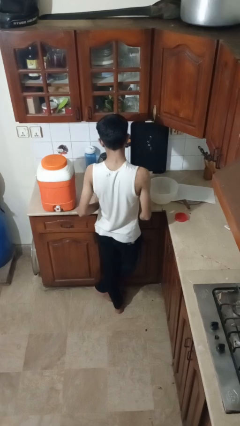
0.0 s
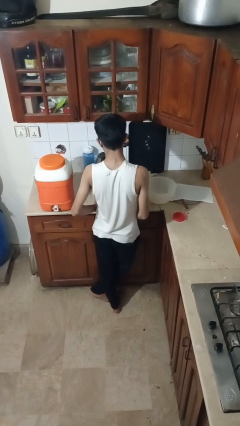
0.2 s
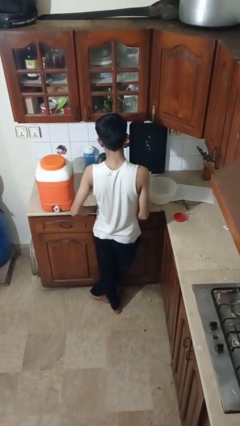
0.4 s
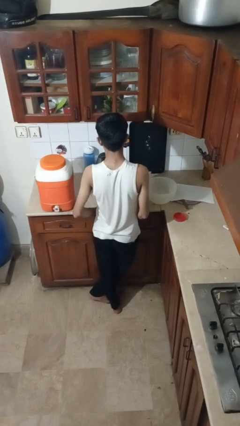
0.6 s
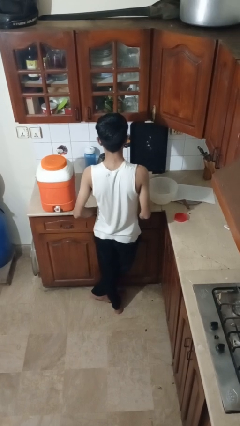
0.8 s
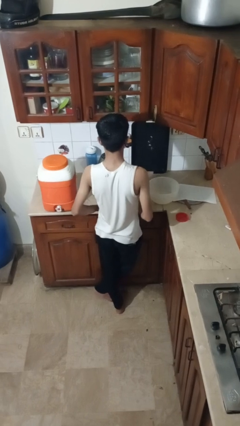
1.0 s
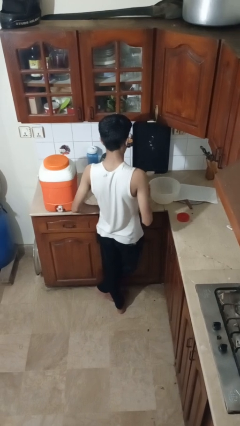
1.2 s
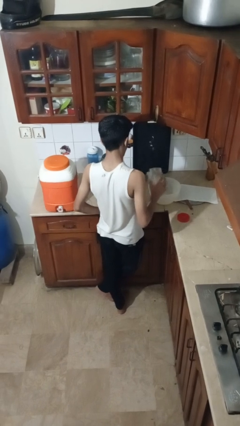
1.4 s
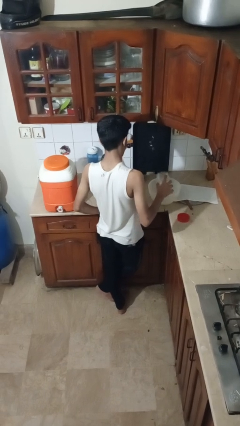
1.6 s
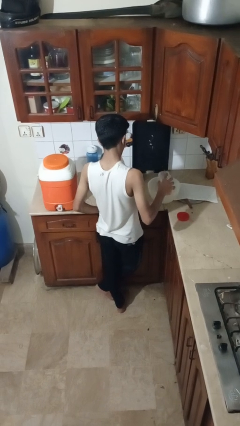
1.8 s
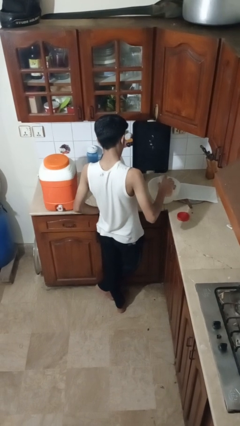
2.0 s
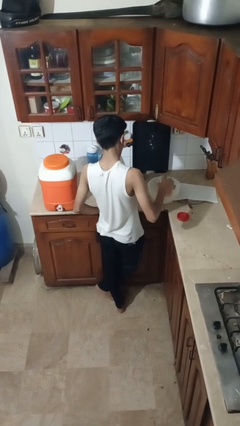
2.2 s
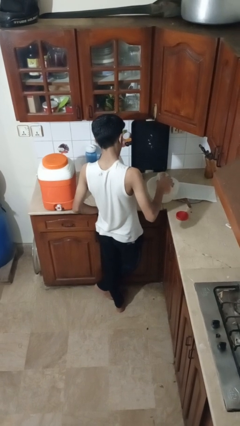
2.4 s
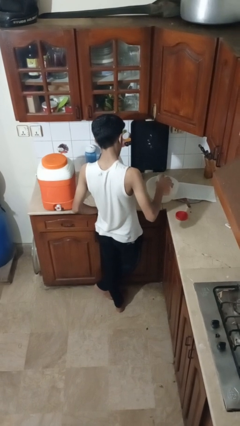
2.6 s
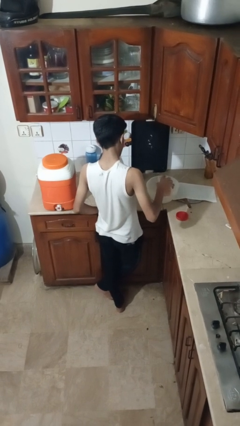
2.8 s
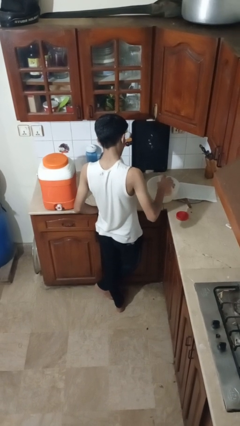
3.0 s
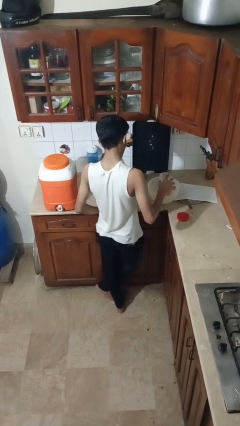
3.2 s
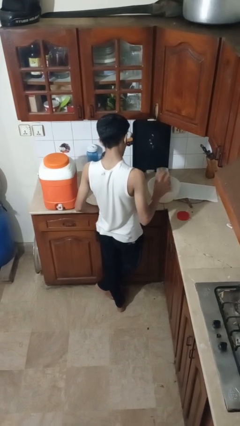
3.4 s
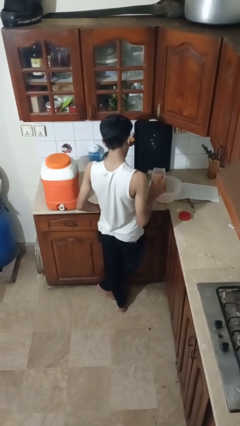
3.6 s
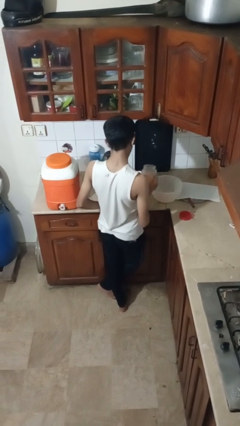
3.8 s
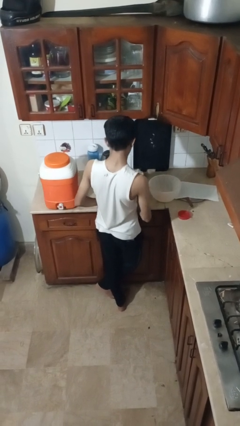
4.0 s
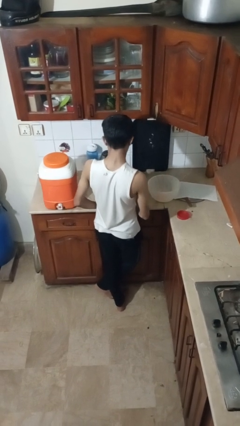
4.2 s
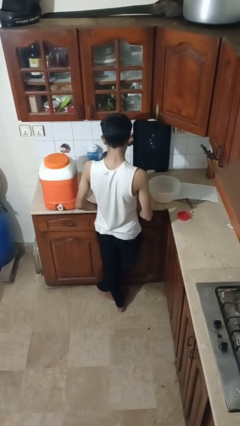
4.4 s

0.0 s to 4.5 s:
person pours into bowl

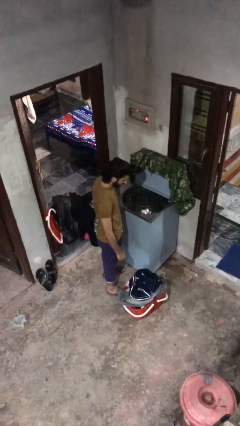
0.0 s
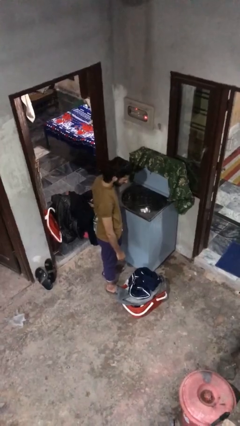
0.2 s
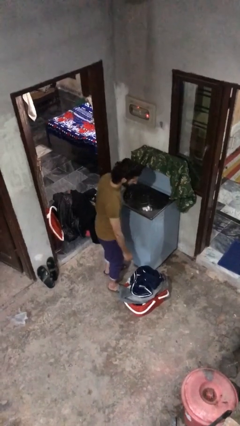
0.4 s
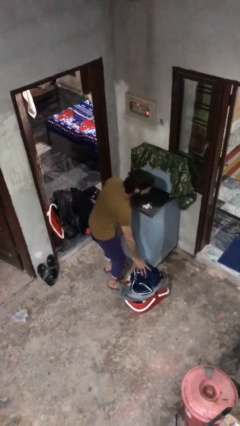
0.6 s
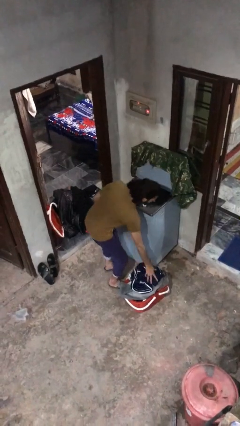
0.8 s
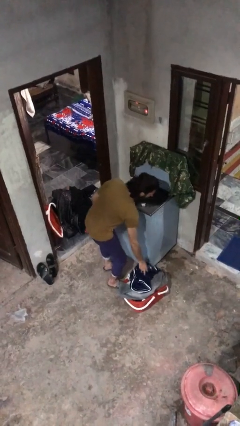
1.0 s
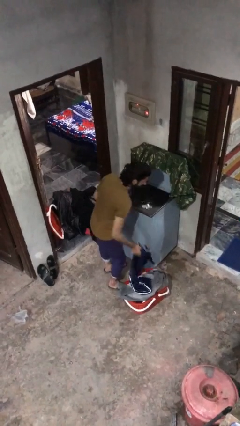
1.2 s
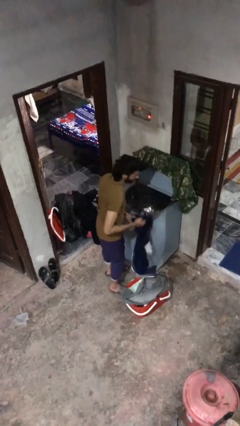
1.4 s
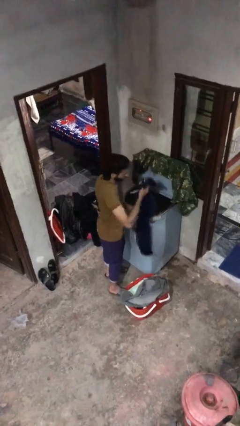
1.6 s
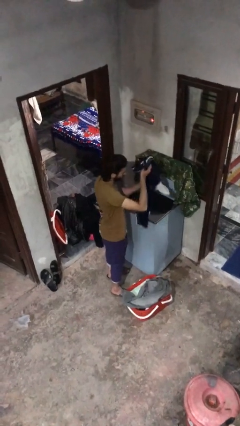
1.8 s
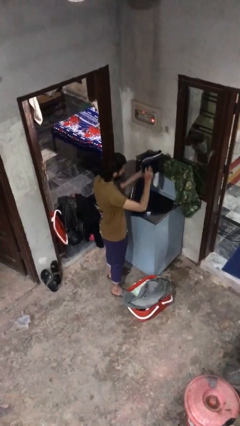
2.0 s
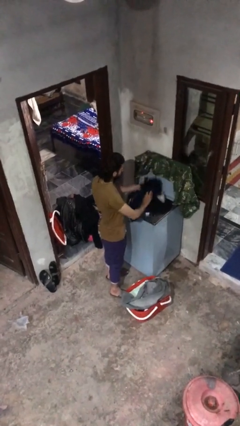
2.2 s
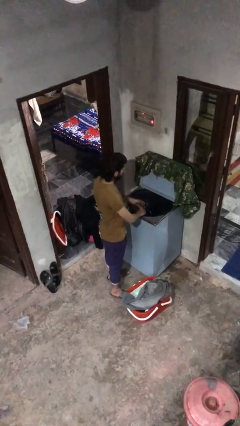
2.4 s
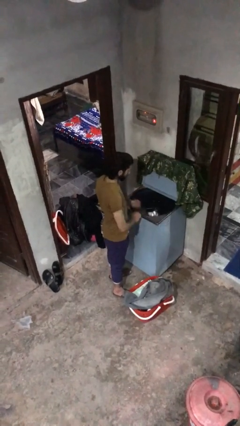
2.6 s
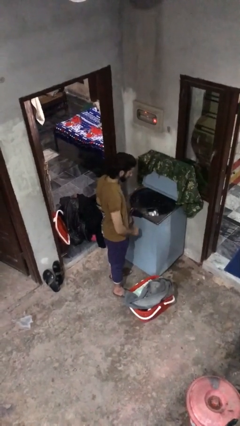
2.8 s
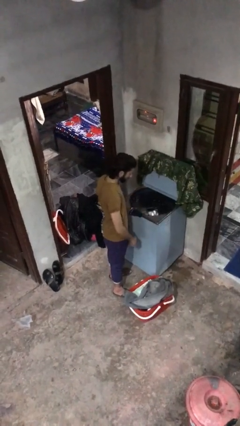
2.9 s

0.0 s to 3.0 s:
person loads clotheswasher

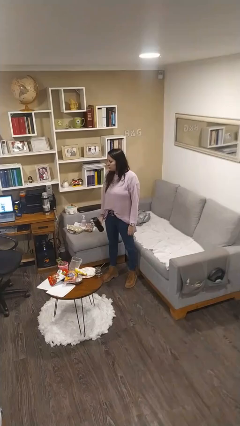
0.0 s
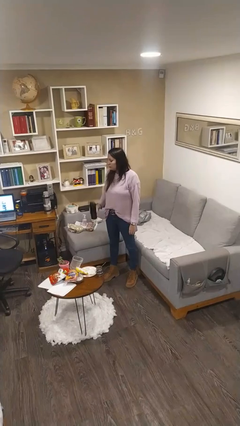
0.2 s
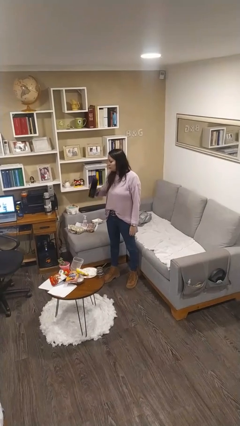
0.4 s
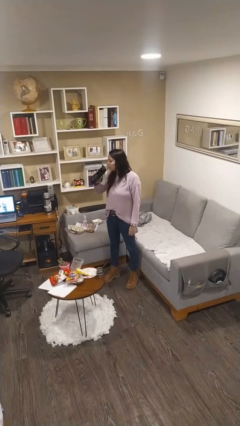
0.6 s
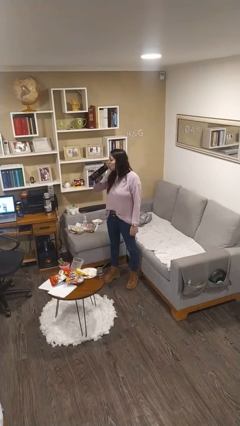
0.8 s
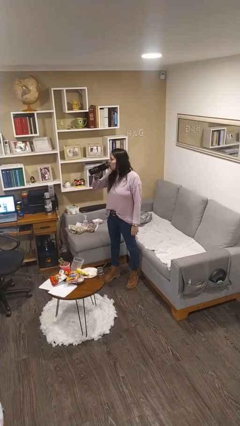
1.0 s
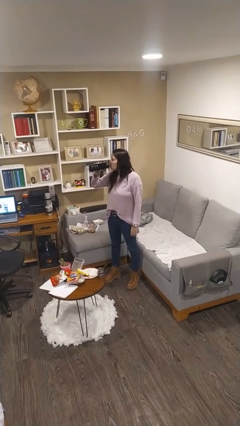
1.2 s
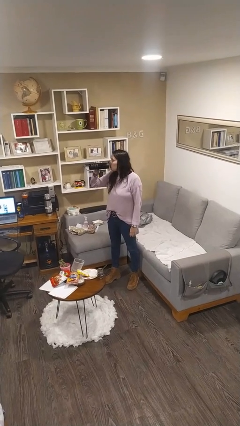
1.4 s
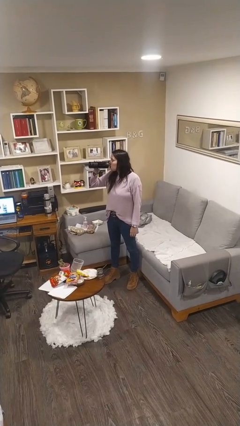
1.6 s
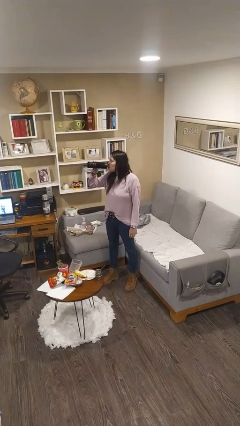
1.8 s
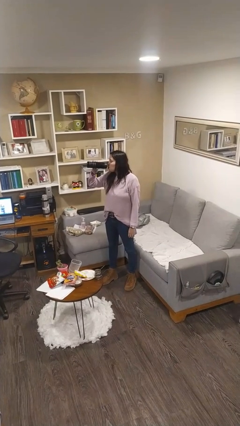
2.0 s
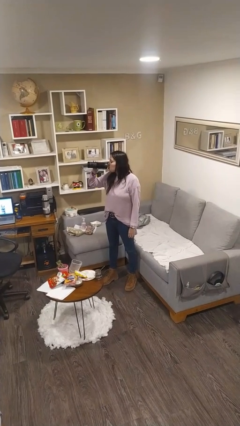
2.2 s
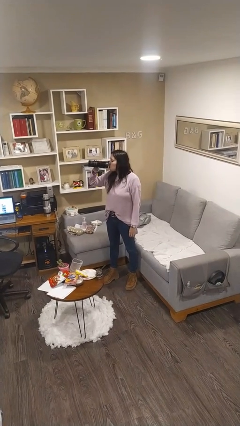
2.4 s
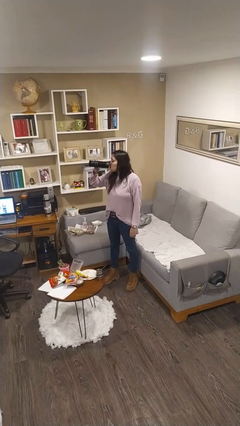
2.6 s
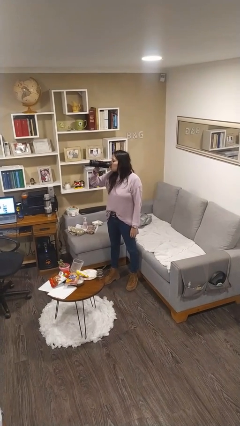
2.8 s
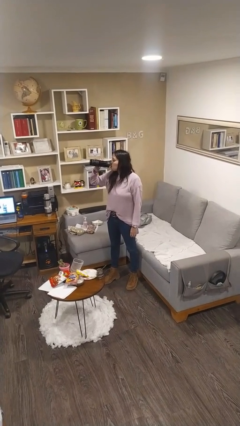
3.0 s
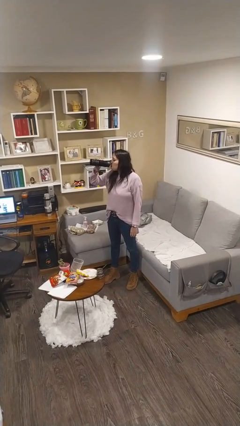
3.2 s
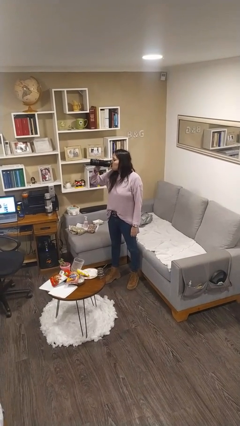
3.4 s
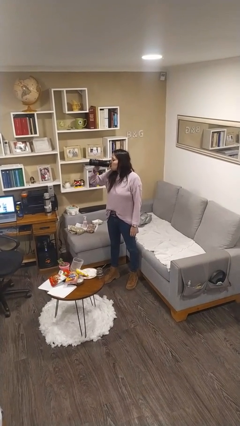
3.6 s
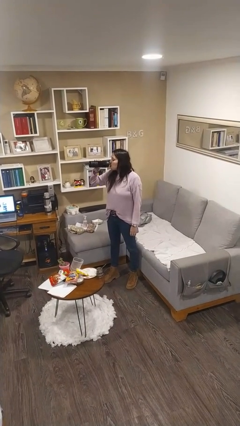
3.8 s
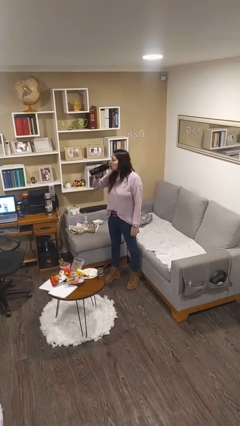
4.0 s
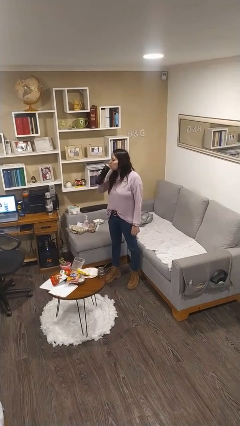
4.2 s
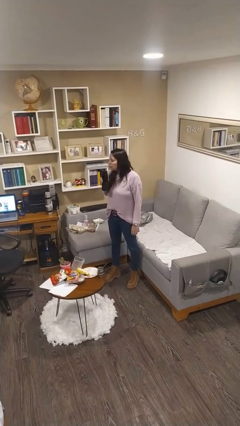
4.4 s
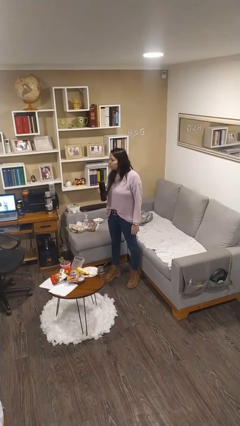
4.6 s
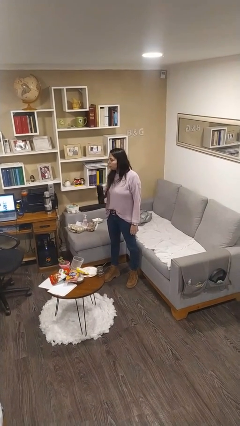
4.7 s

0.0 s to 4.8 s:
person drinks from bottle

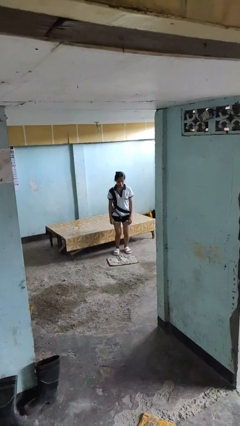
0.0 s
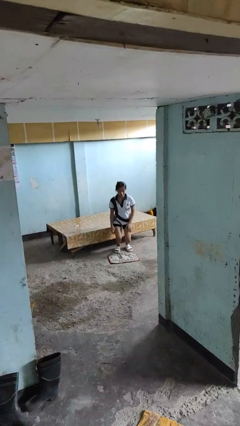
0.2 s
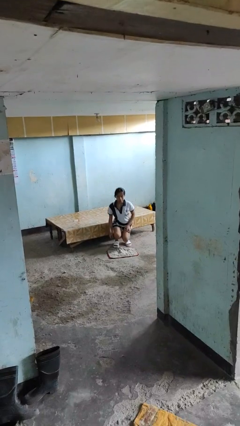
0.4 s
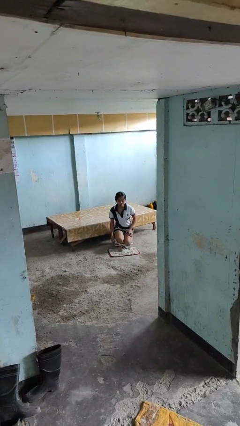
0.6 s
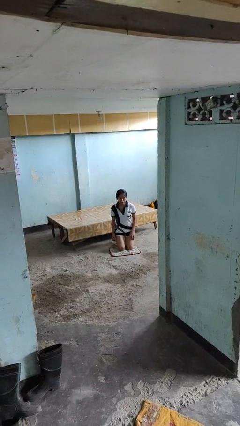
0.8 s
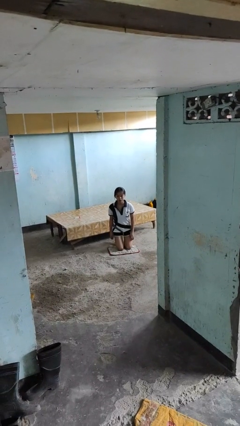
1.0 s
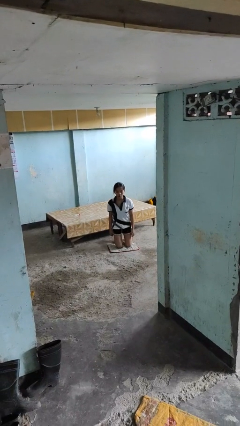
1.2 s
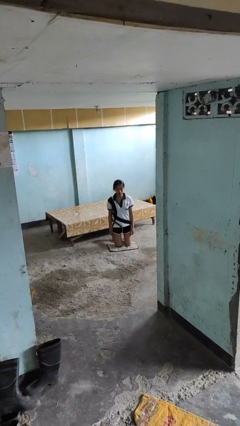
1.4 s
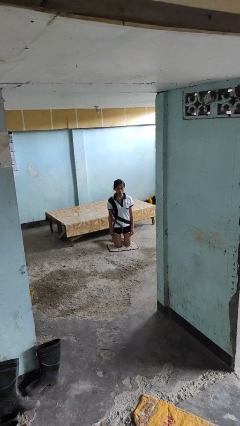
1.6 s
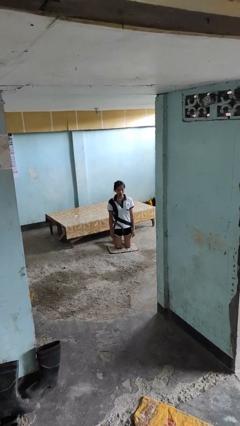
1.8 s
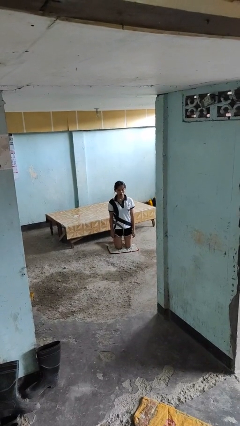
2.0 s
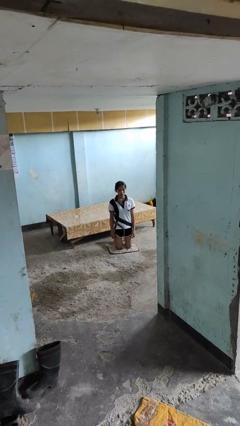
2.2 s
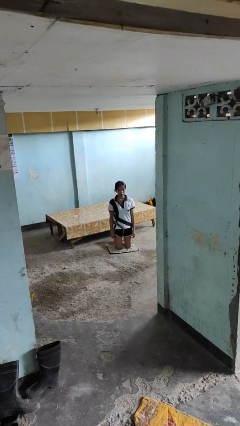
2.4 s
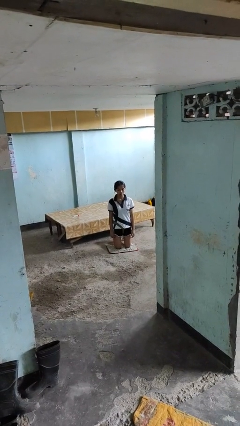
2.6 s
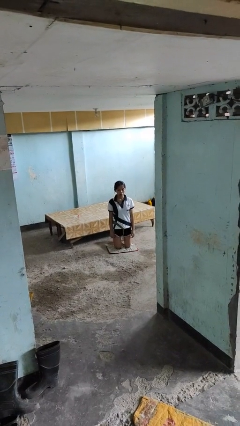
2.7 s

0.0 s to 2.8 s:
person kneels

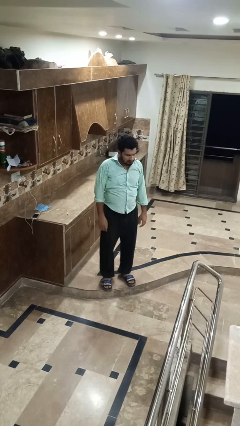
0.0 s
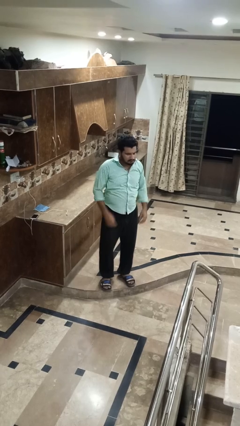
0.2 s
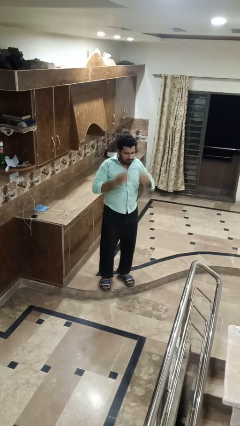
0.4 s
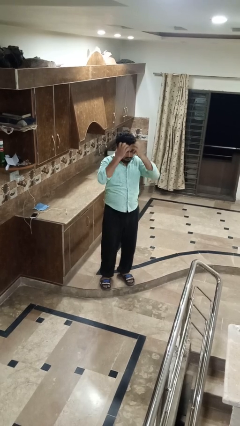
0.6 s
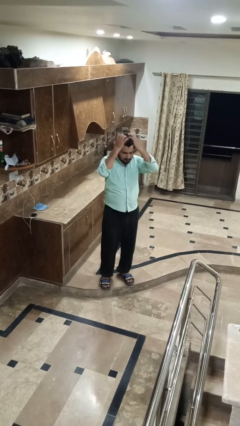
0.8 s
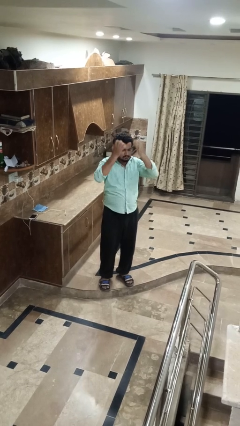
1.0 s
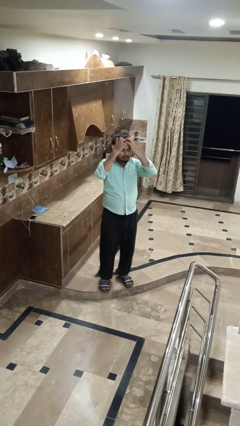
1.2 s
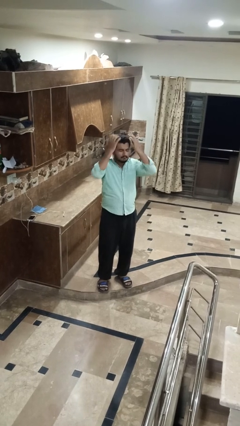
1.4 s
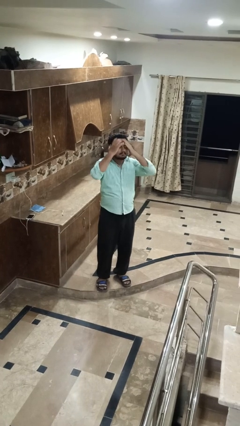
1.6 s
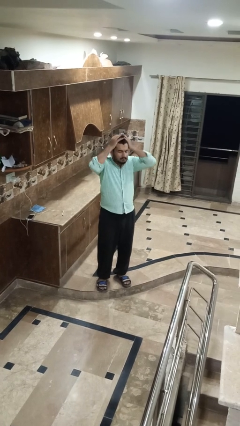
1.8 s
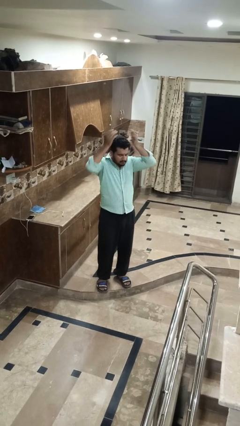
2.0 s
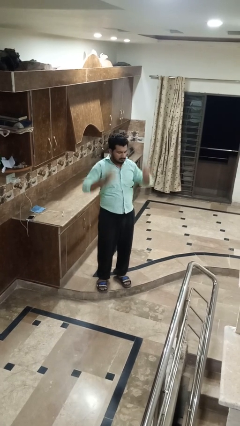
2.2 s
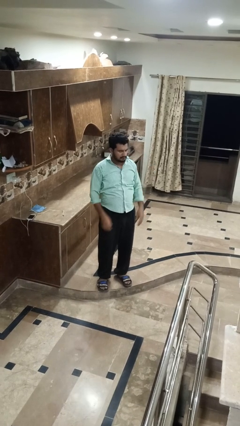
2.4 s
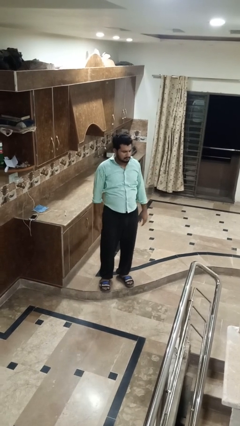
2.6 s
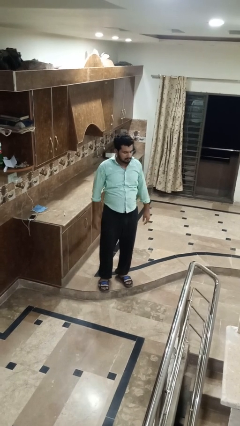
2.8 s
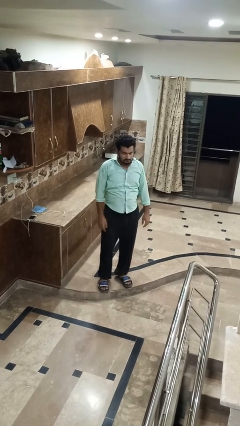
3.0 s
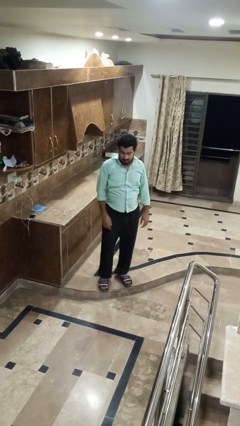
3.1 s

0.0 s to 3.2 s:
person strokes hair
